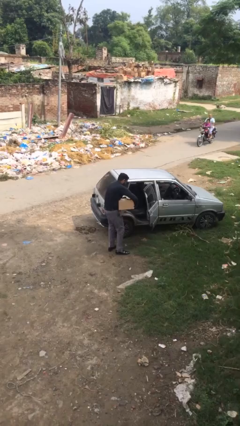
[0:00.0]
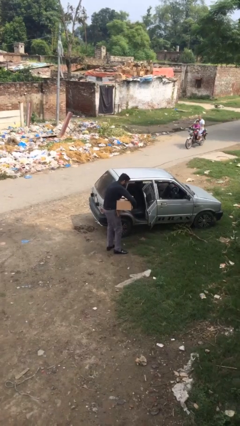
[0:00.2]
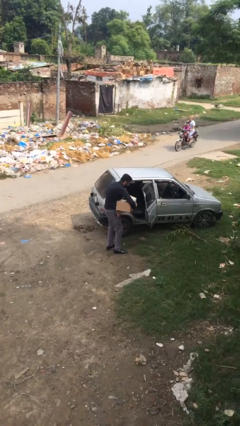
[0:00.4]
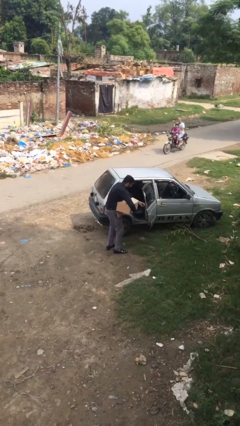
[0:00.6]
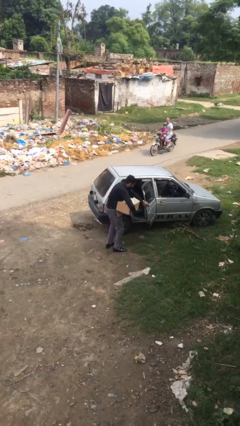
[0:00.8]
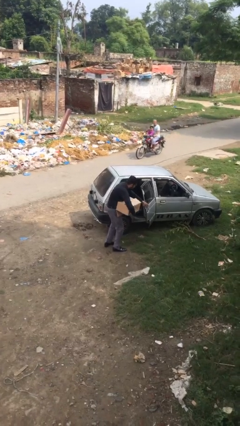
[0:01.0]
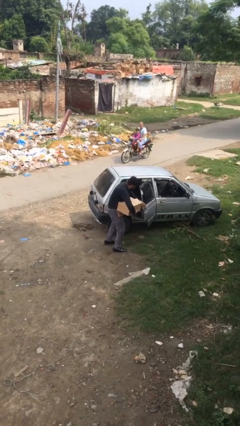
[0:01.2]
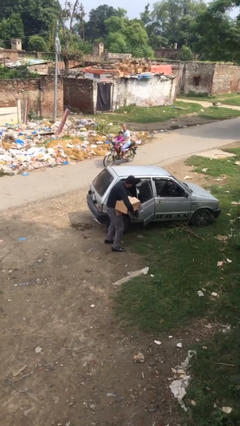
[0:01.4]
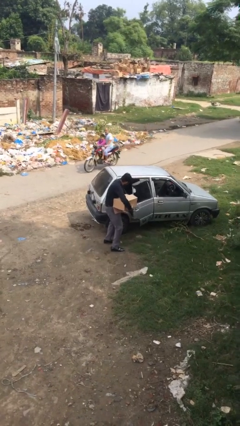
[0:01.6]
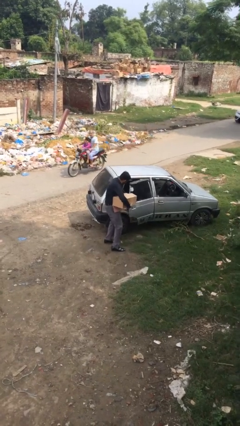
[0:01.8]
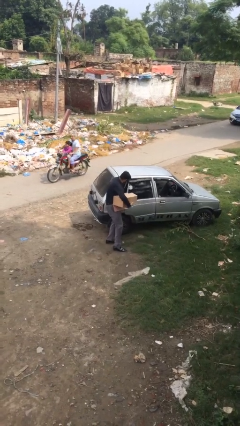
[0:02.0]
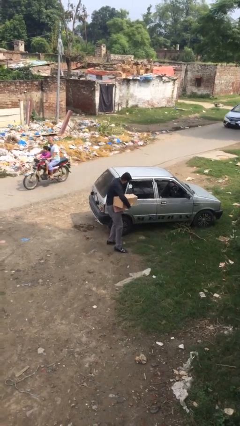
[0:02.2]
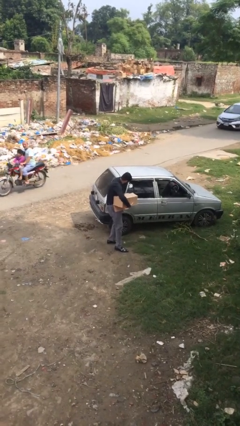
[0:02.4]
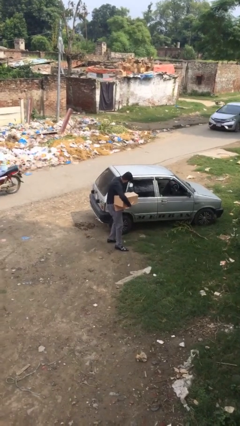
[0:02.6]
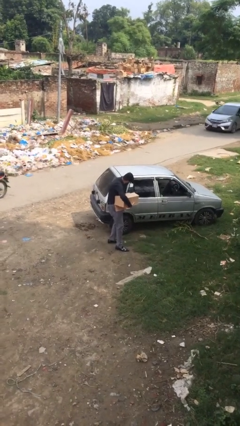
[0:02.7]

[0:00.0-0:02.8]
person closes car door

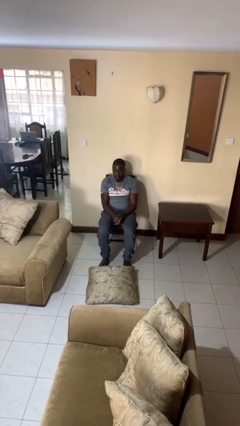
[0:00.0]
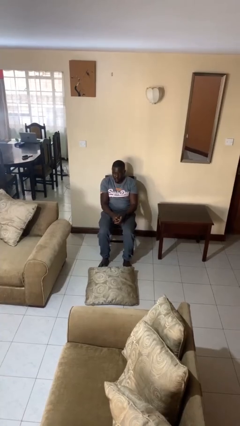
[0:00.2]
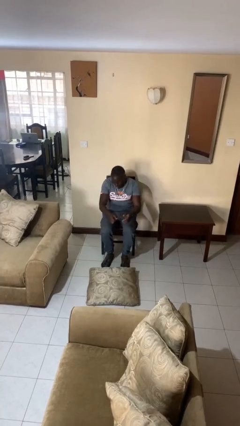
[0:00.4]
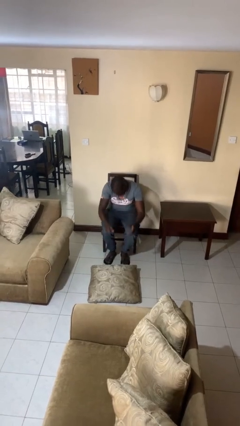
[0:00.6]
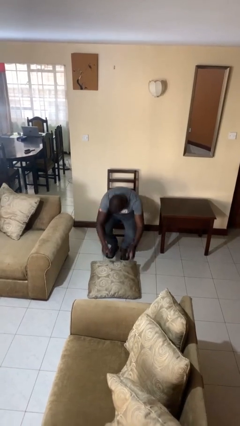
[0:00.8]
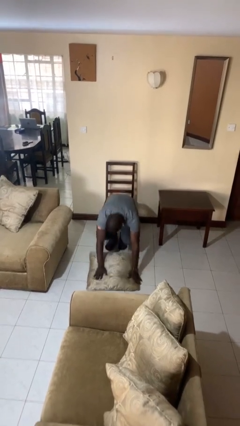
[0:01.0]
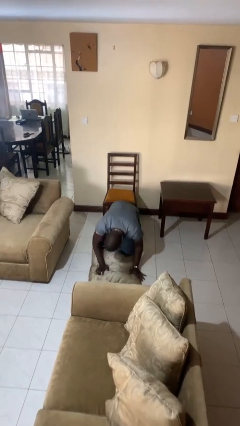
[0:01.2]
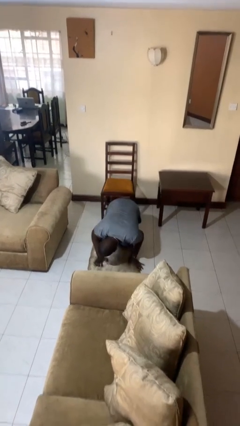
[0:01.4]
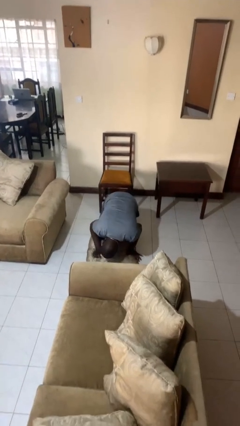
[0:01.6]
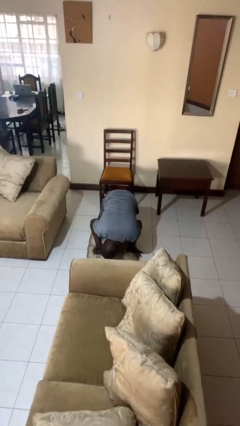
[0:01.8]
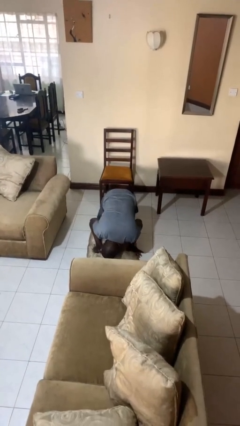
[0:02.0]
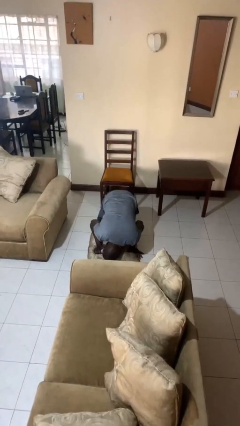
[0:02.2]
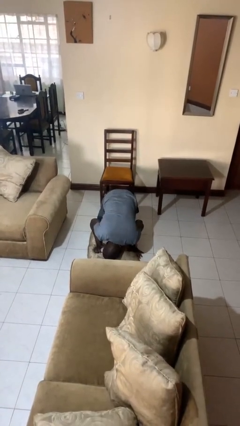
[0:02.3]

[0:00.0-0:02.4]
person falls from chair

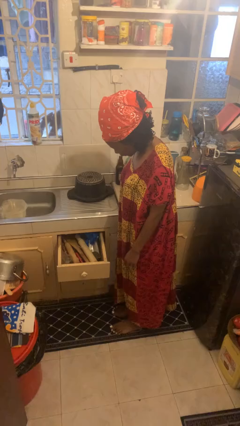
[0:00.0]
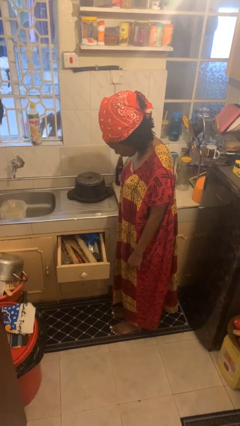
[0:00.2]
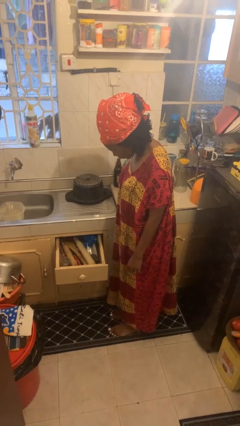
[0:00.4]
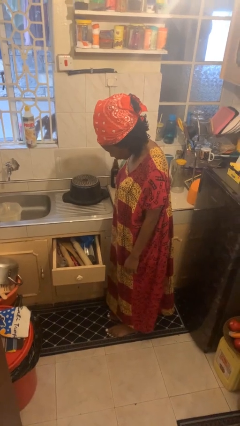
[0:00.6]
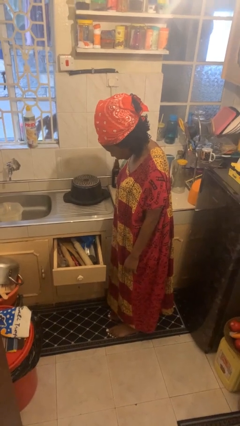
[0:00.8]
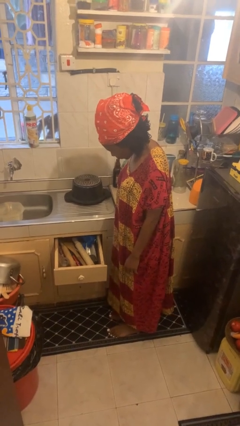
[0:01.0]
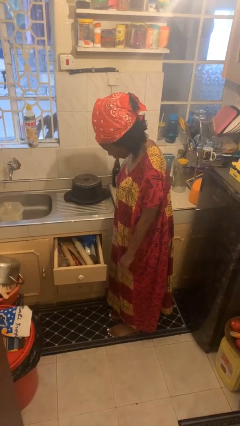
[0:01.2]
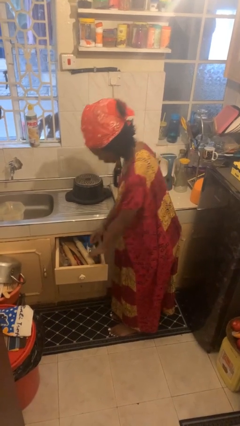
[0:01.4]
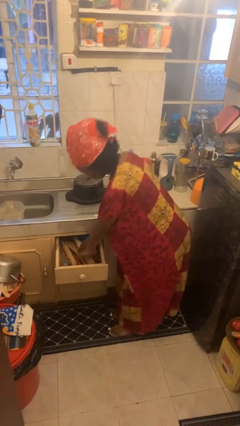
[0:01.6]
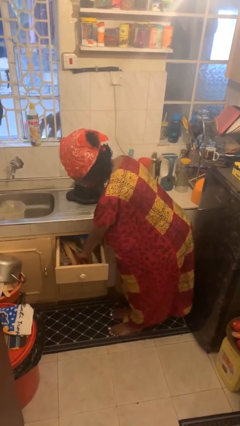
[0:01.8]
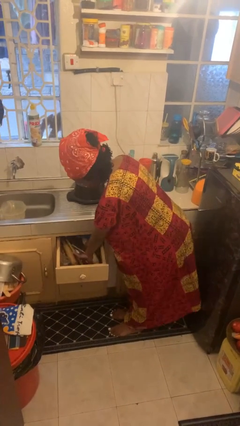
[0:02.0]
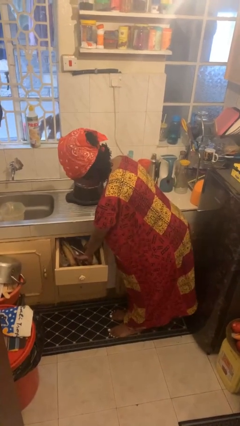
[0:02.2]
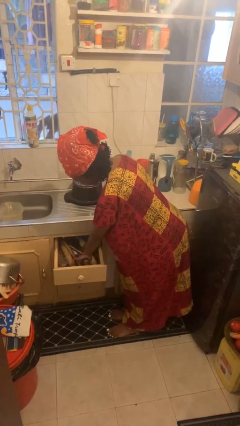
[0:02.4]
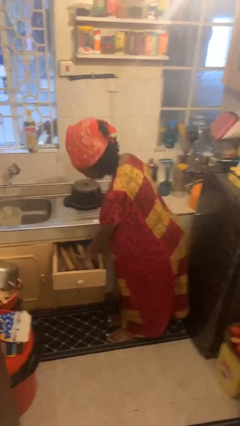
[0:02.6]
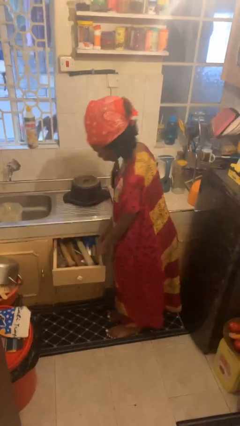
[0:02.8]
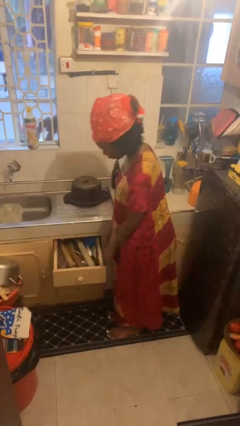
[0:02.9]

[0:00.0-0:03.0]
person searches in kitchen drawer

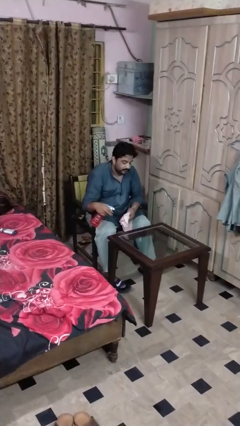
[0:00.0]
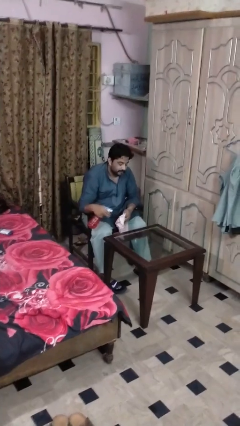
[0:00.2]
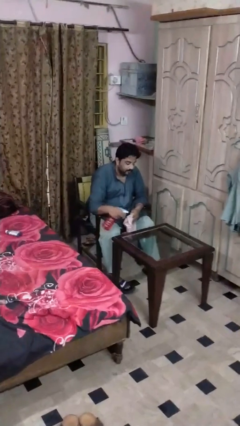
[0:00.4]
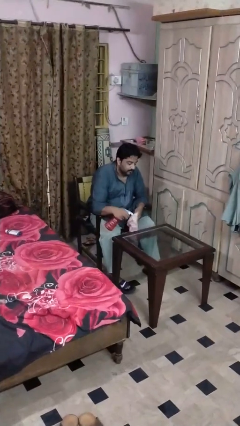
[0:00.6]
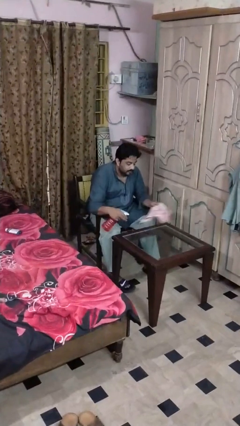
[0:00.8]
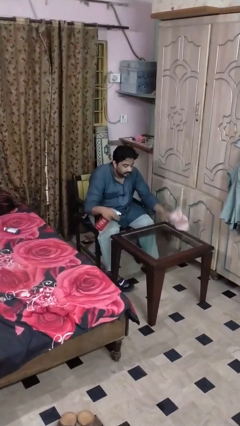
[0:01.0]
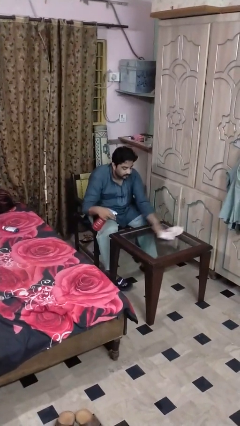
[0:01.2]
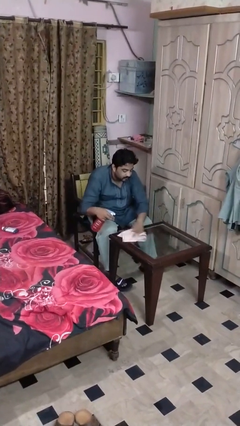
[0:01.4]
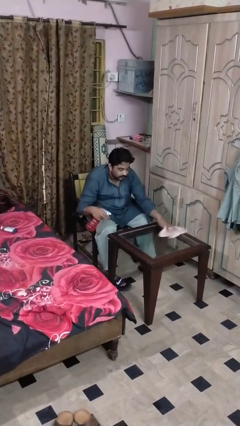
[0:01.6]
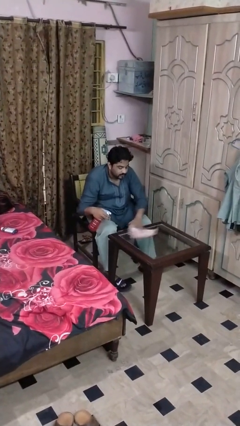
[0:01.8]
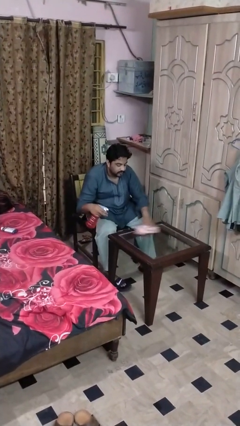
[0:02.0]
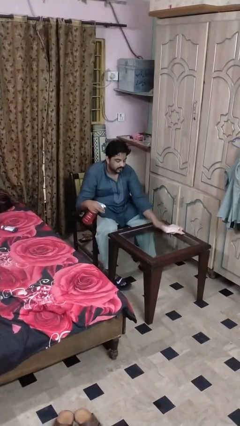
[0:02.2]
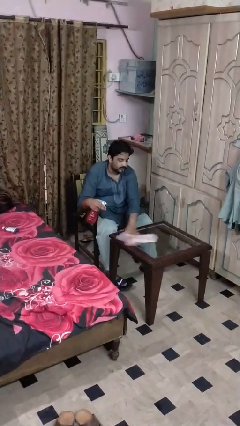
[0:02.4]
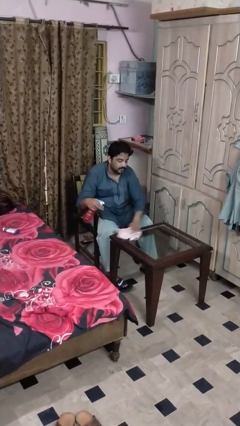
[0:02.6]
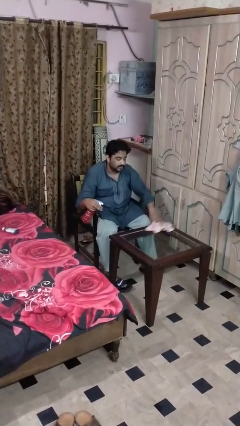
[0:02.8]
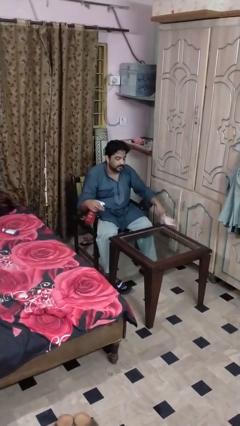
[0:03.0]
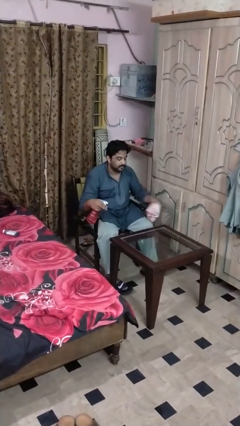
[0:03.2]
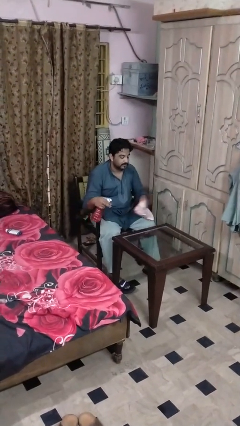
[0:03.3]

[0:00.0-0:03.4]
person sprays from bottle

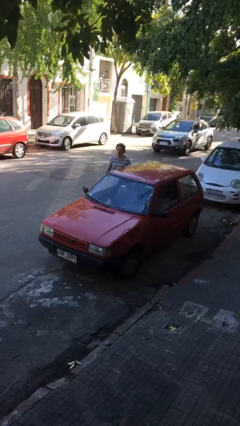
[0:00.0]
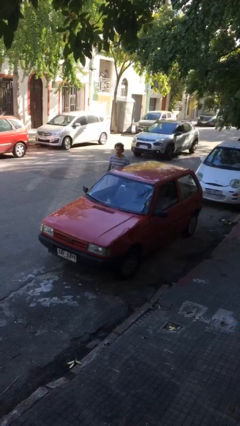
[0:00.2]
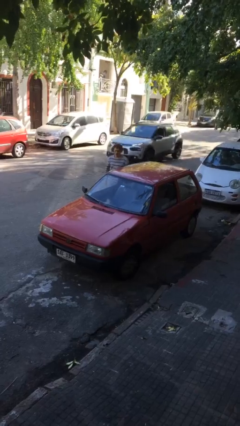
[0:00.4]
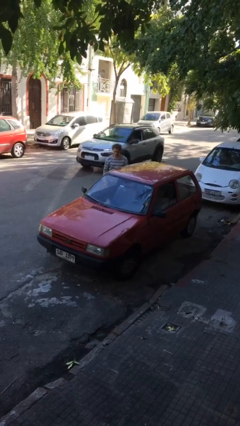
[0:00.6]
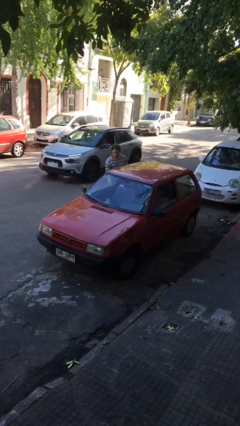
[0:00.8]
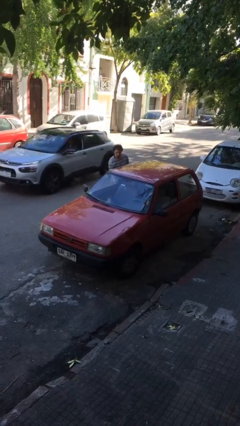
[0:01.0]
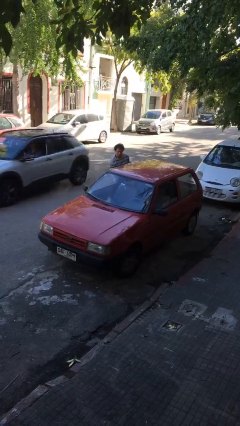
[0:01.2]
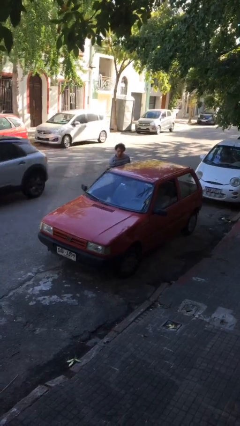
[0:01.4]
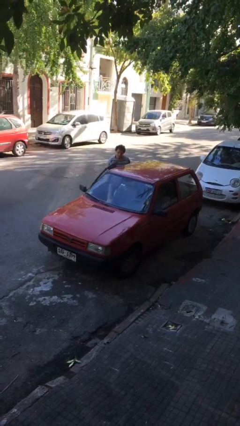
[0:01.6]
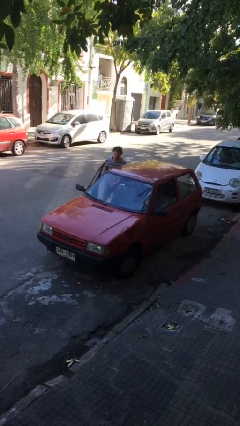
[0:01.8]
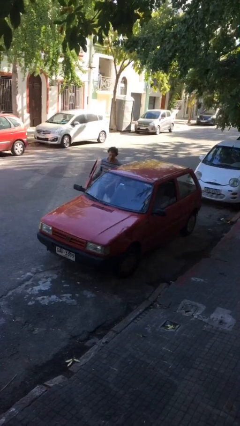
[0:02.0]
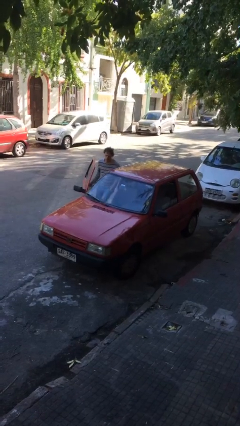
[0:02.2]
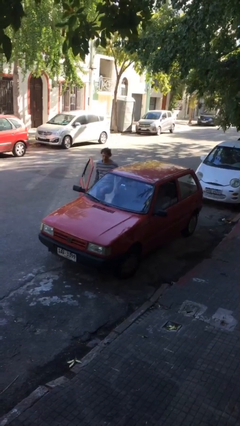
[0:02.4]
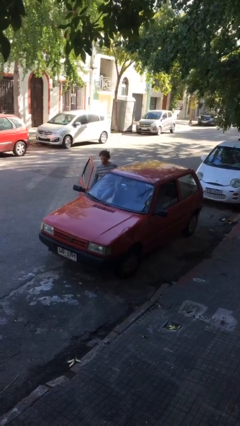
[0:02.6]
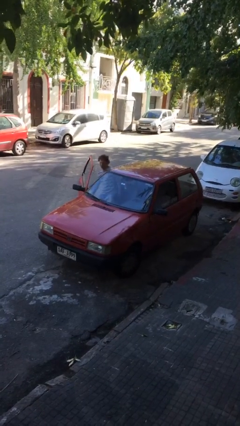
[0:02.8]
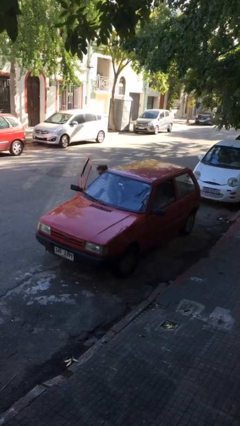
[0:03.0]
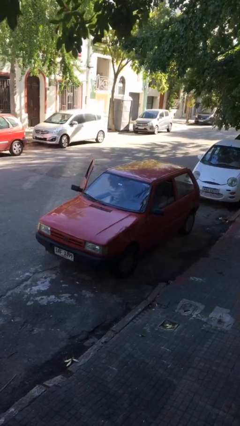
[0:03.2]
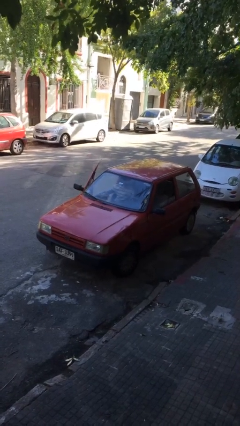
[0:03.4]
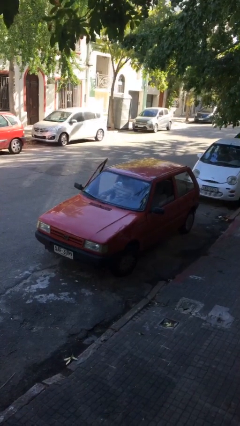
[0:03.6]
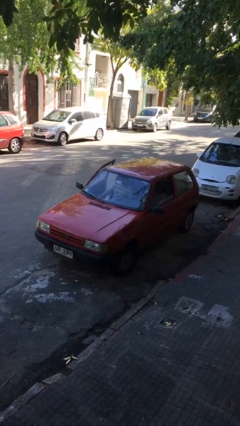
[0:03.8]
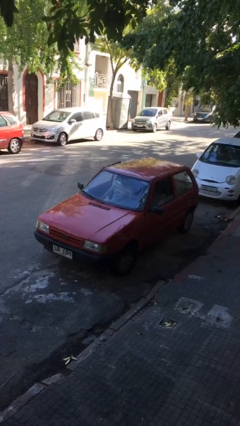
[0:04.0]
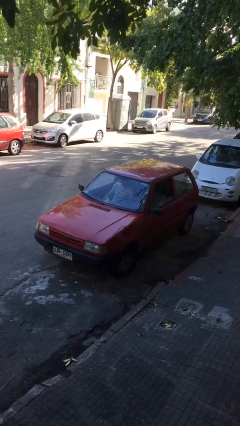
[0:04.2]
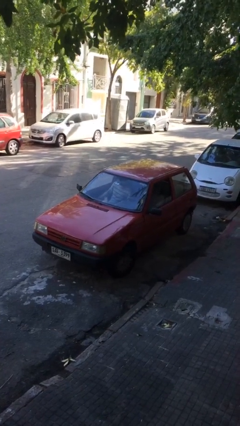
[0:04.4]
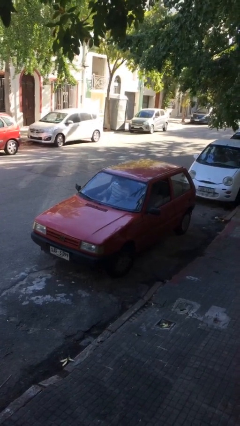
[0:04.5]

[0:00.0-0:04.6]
car picks up person

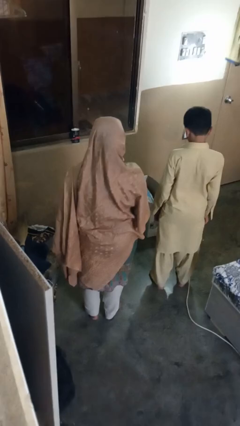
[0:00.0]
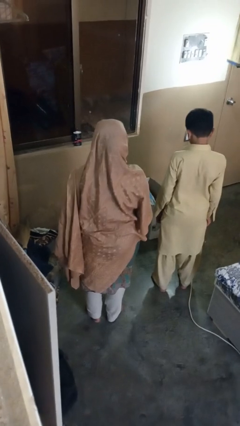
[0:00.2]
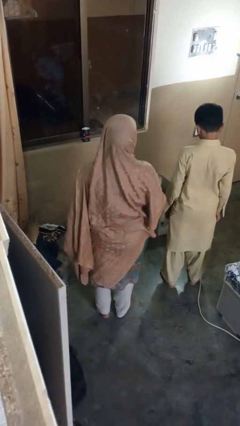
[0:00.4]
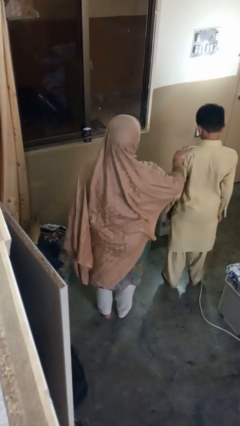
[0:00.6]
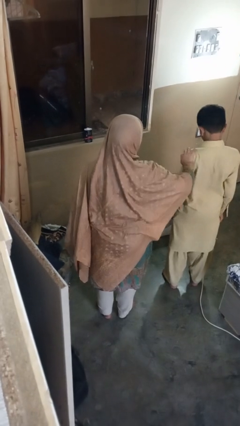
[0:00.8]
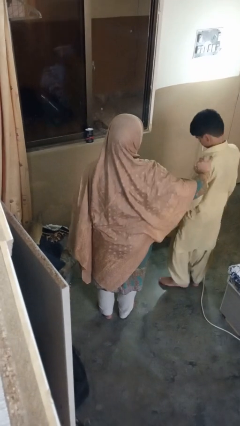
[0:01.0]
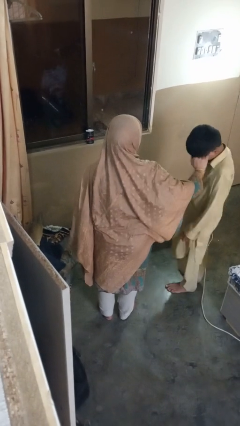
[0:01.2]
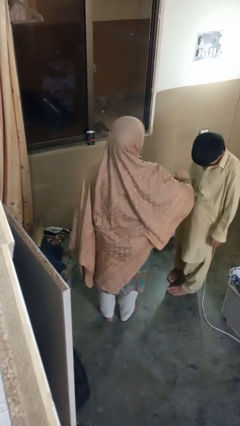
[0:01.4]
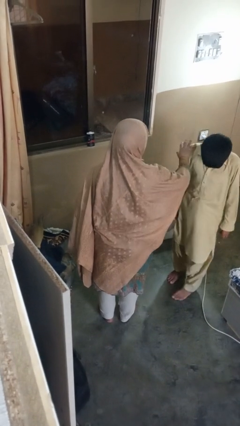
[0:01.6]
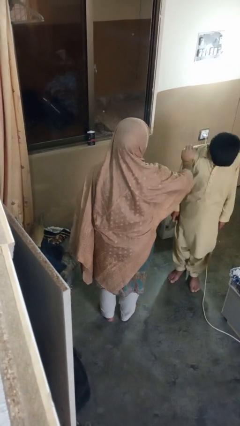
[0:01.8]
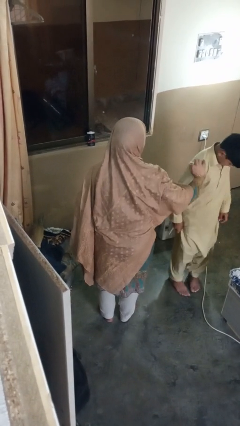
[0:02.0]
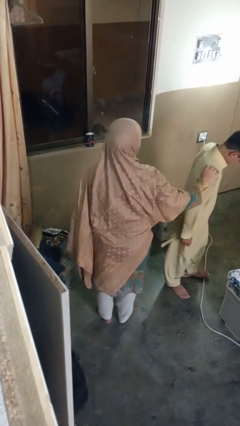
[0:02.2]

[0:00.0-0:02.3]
person grabs person by shoulder
